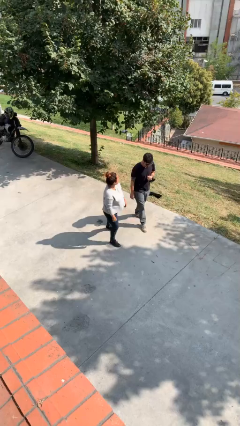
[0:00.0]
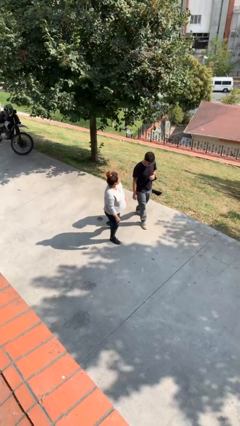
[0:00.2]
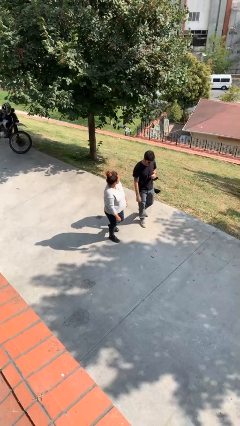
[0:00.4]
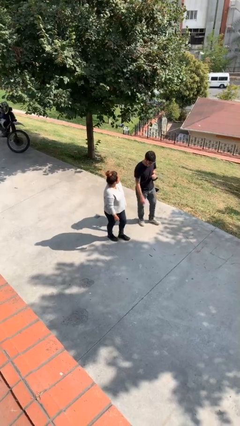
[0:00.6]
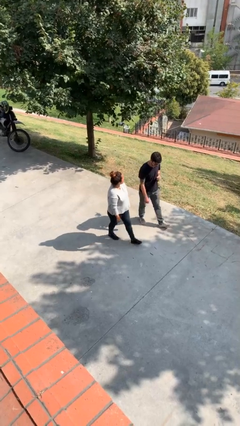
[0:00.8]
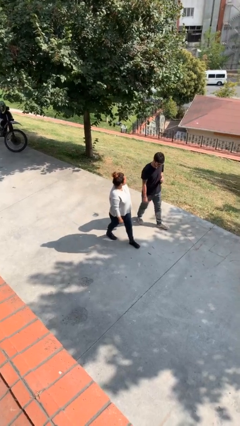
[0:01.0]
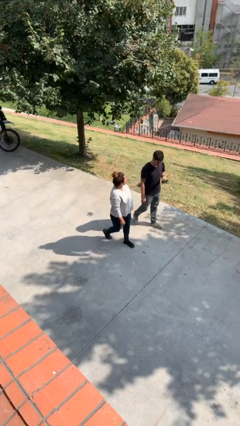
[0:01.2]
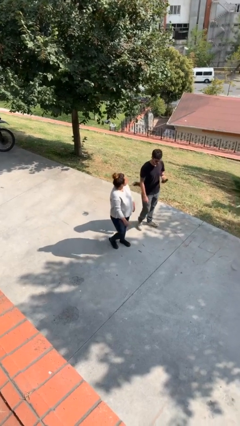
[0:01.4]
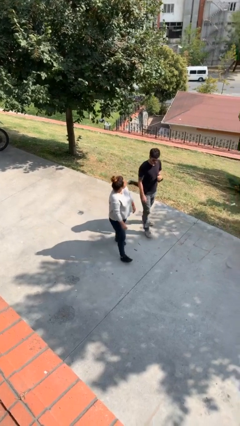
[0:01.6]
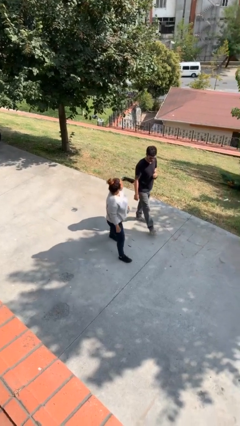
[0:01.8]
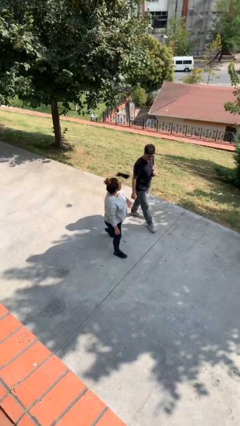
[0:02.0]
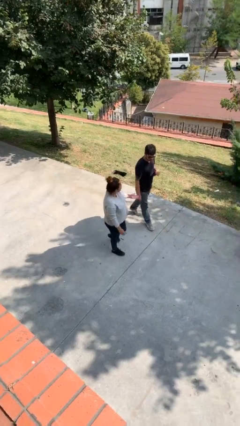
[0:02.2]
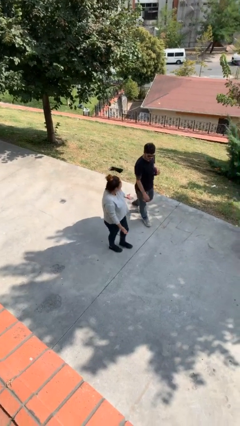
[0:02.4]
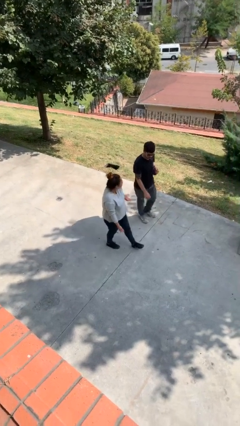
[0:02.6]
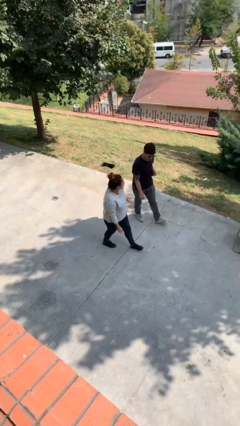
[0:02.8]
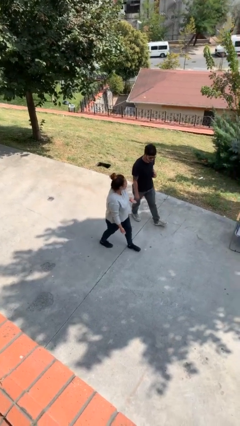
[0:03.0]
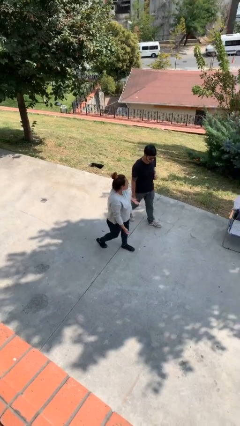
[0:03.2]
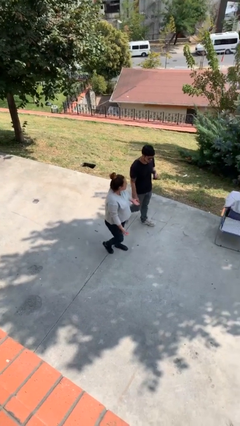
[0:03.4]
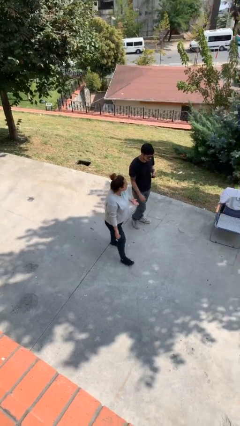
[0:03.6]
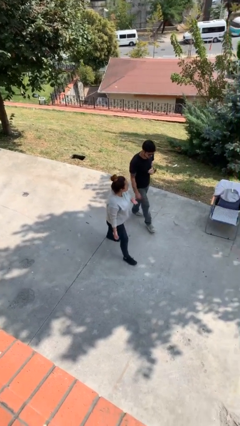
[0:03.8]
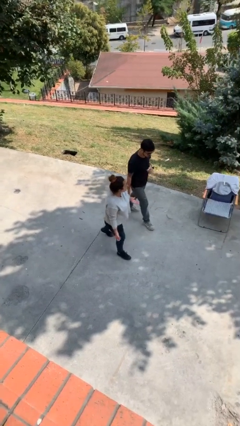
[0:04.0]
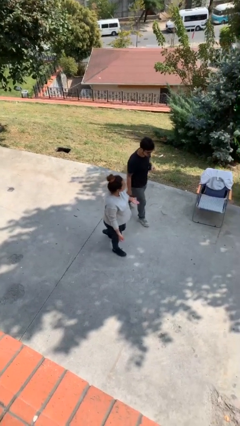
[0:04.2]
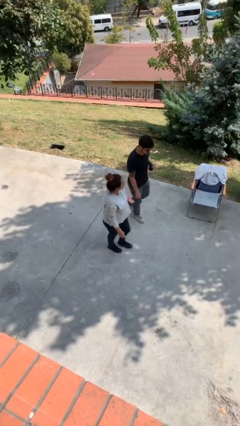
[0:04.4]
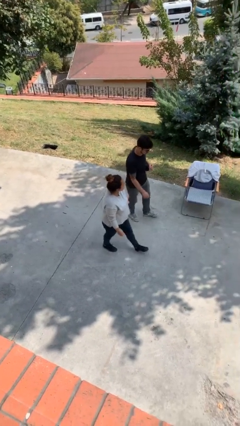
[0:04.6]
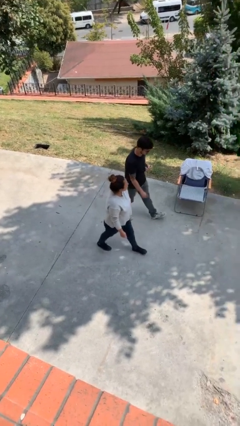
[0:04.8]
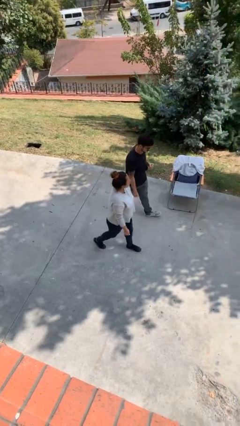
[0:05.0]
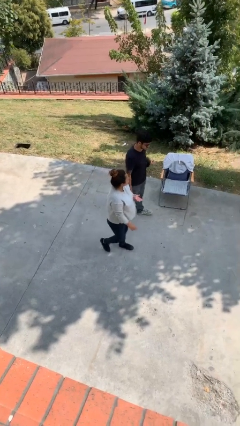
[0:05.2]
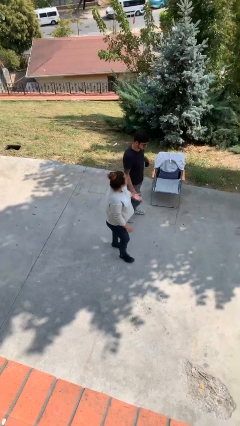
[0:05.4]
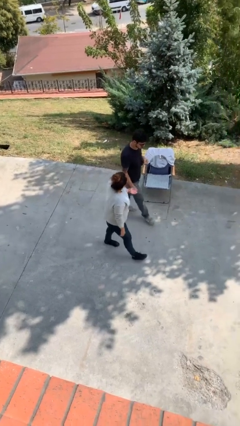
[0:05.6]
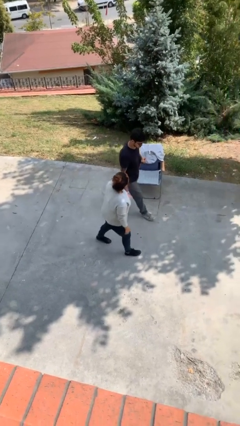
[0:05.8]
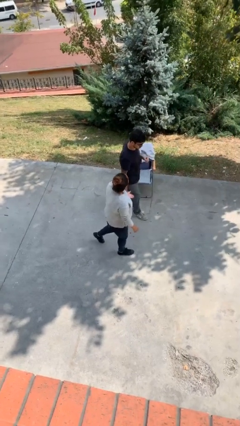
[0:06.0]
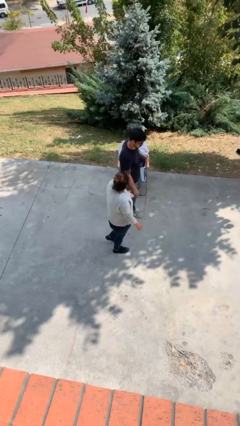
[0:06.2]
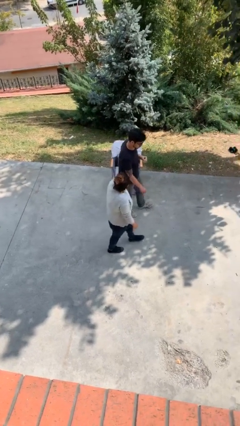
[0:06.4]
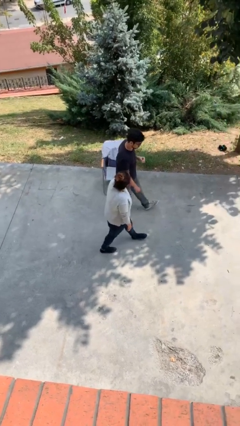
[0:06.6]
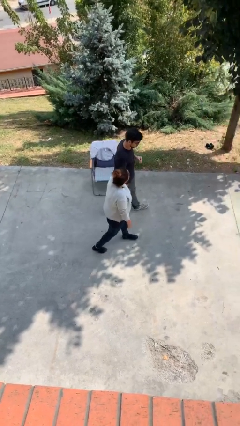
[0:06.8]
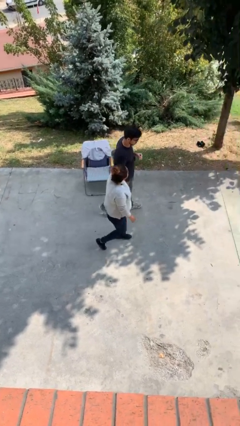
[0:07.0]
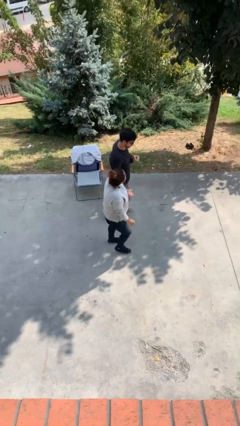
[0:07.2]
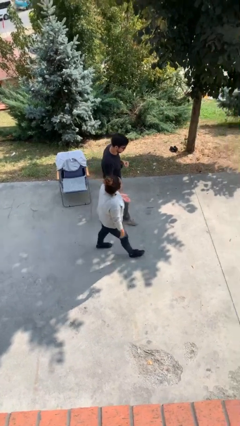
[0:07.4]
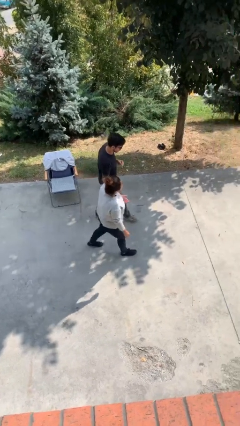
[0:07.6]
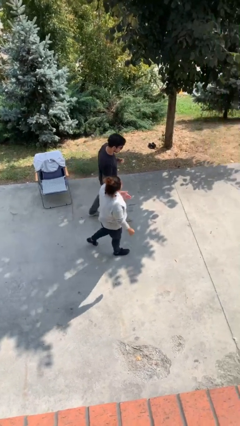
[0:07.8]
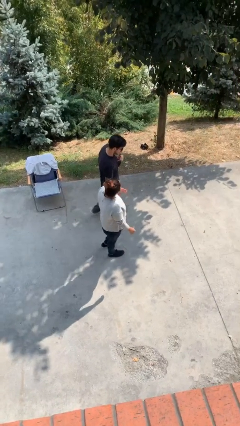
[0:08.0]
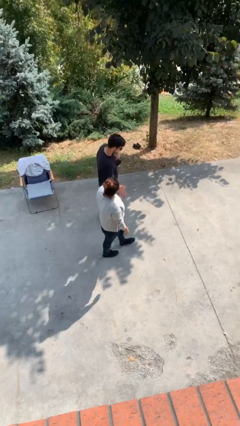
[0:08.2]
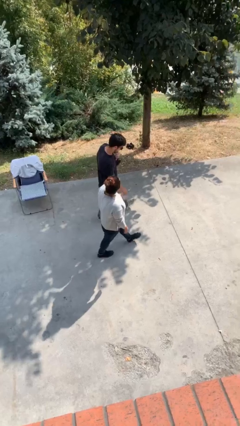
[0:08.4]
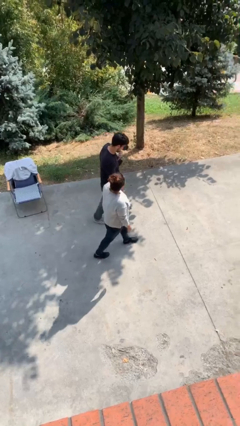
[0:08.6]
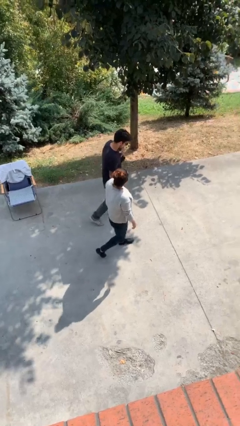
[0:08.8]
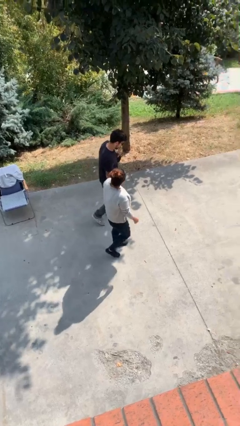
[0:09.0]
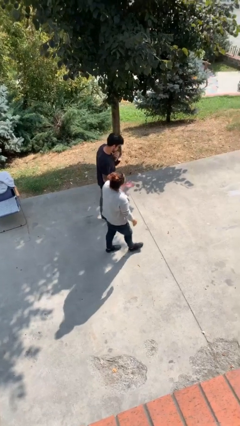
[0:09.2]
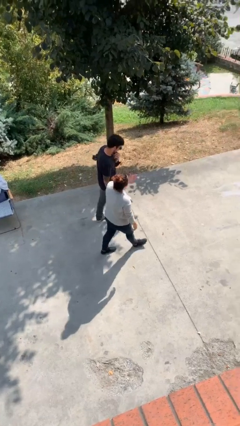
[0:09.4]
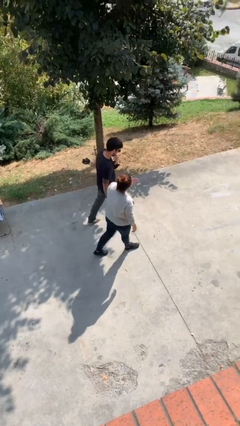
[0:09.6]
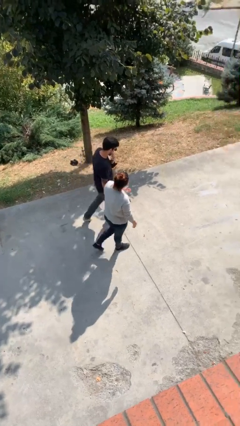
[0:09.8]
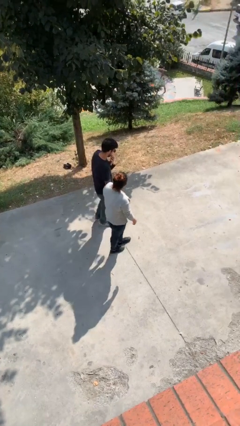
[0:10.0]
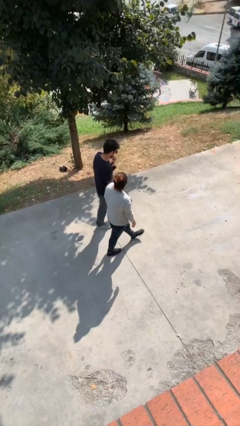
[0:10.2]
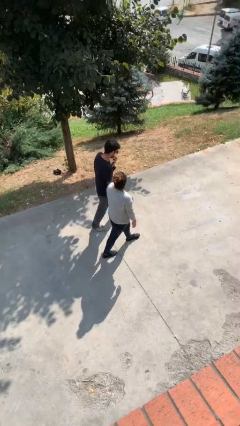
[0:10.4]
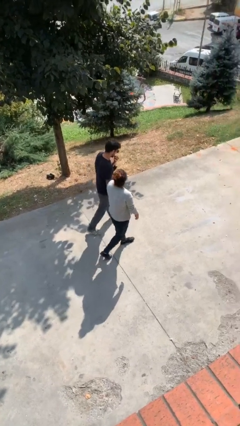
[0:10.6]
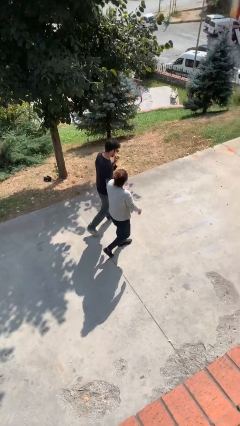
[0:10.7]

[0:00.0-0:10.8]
person talks to person

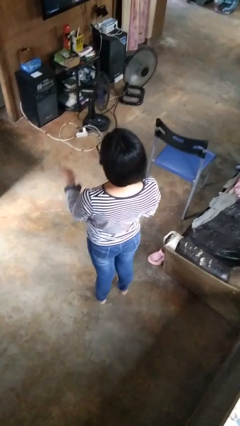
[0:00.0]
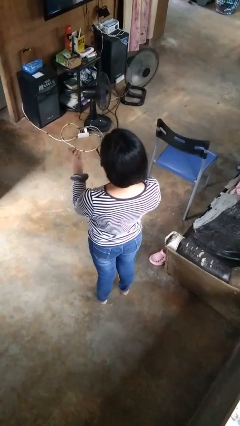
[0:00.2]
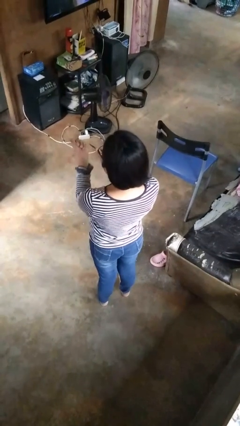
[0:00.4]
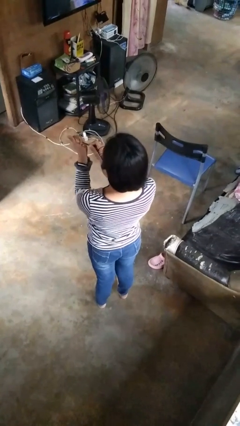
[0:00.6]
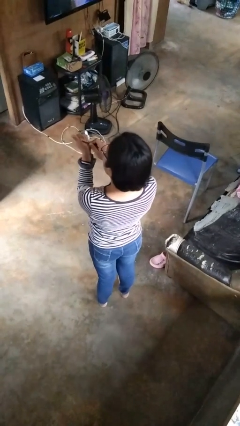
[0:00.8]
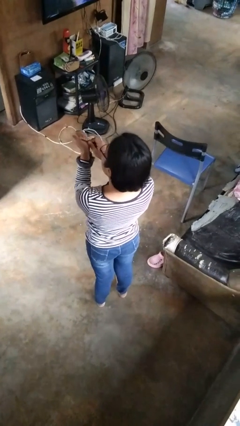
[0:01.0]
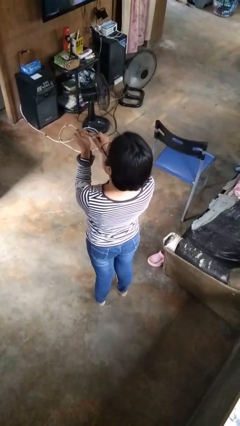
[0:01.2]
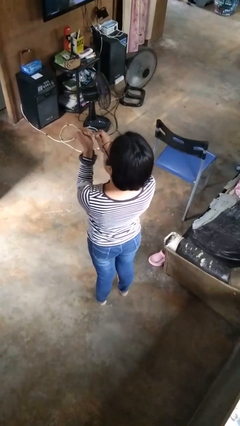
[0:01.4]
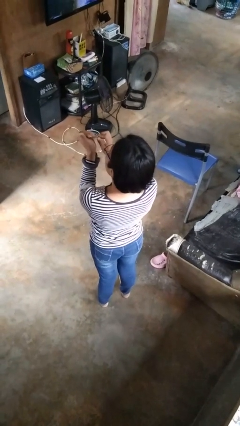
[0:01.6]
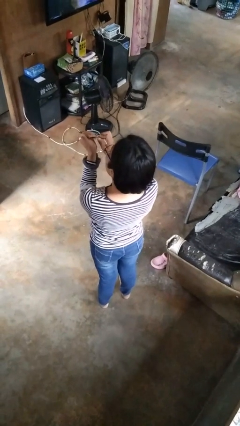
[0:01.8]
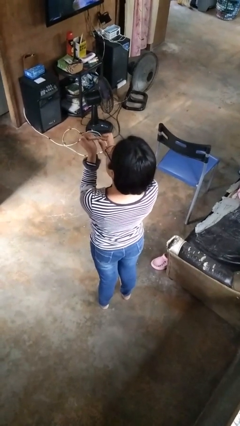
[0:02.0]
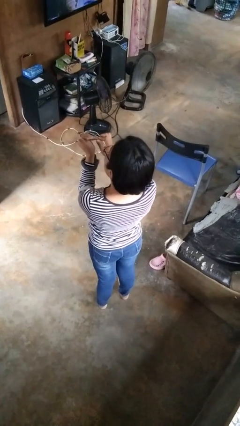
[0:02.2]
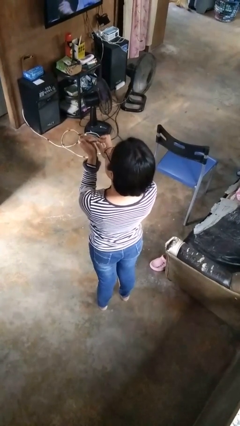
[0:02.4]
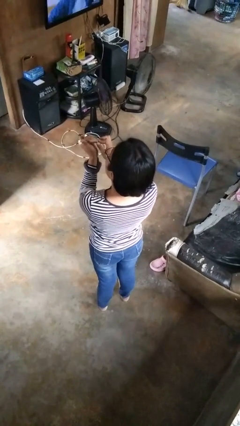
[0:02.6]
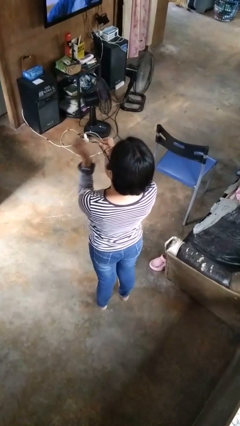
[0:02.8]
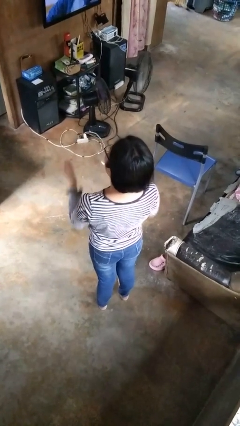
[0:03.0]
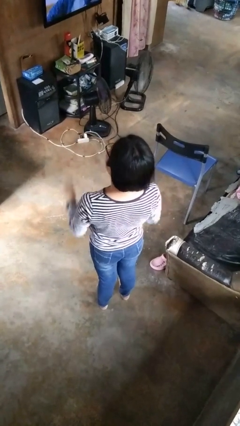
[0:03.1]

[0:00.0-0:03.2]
person files fingernails

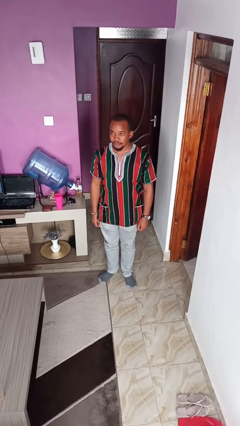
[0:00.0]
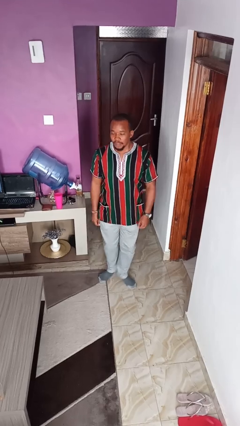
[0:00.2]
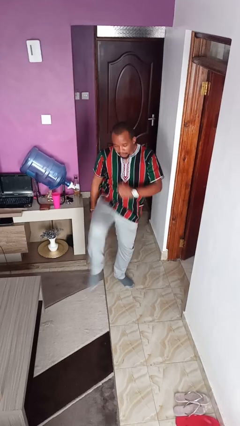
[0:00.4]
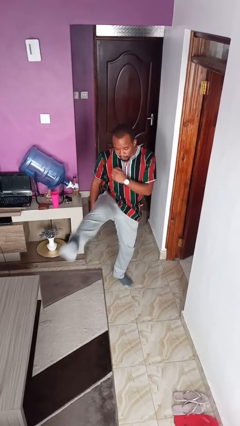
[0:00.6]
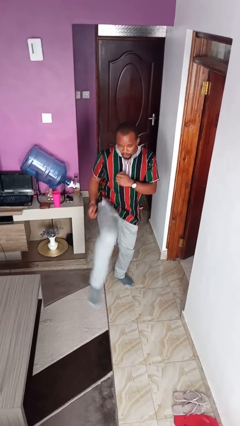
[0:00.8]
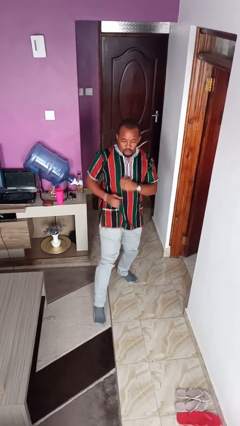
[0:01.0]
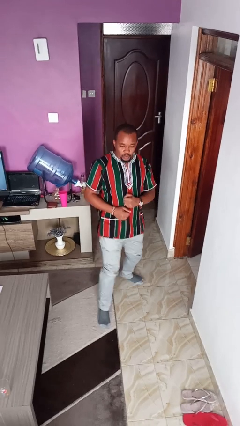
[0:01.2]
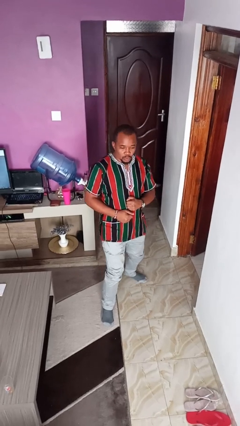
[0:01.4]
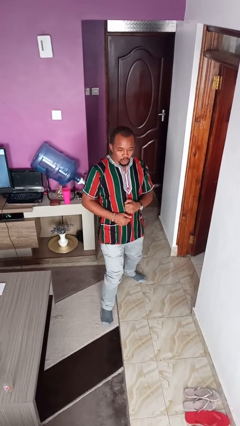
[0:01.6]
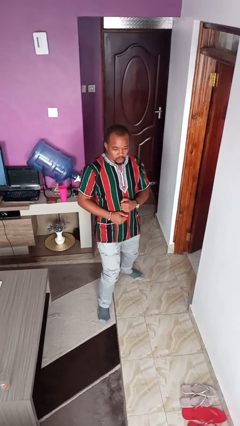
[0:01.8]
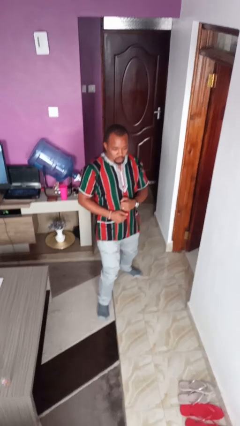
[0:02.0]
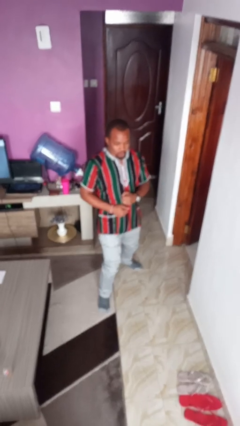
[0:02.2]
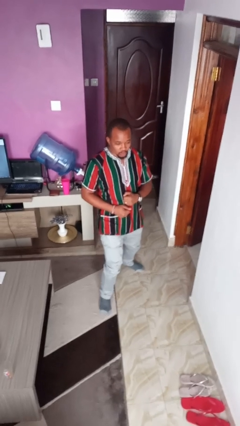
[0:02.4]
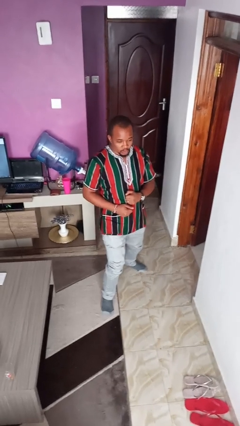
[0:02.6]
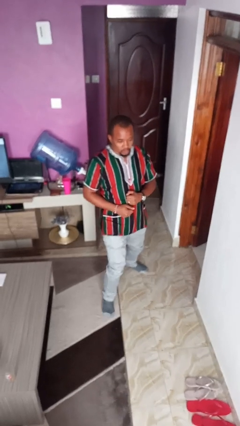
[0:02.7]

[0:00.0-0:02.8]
person karate kicks

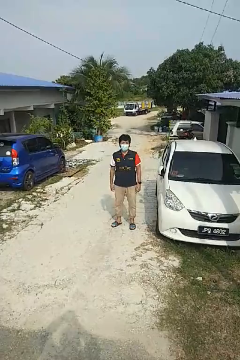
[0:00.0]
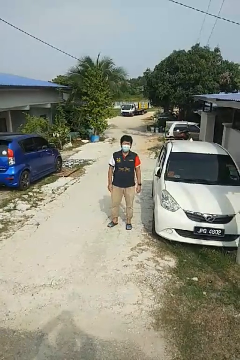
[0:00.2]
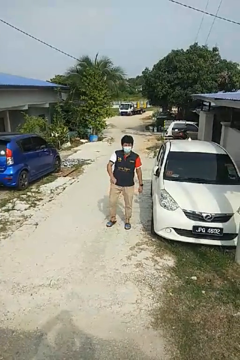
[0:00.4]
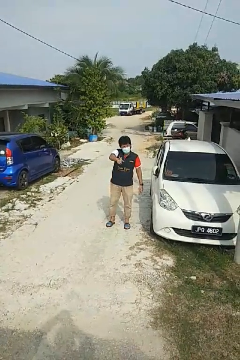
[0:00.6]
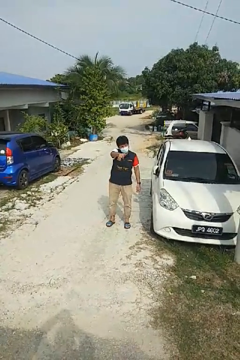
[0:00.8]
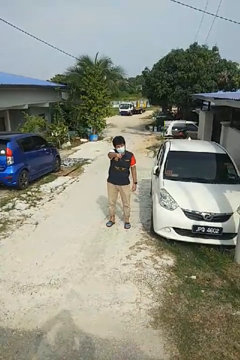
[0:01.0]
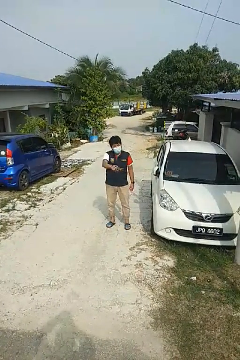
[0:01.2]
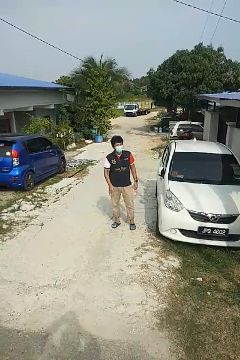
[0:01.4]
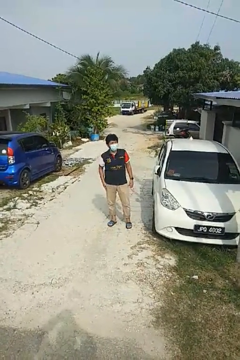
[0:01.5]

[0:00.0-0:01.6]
person points at person
